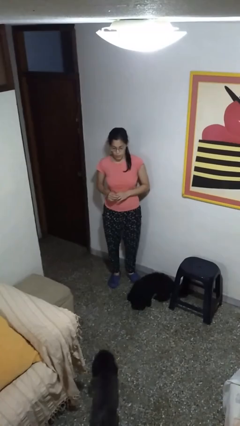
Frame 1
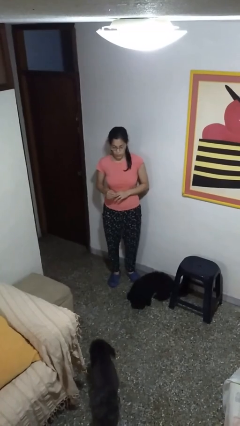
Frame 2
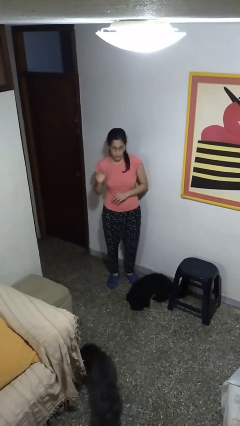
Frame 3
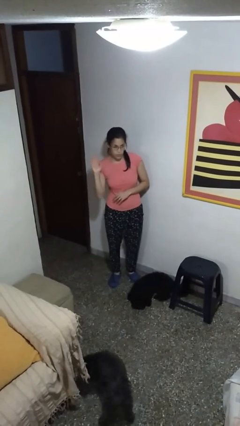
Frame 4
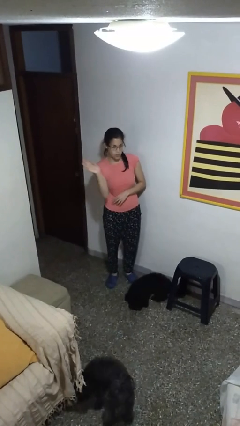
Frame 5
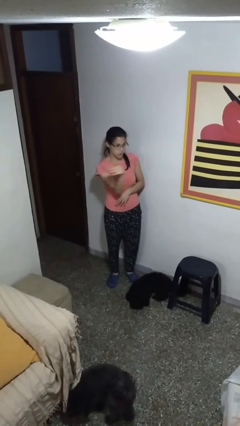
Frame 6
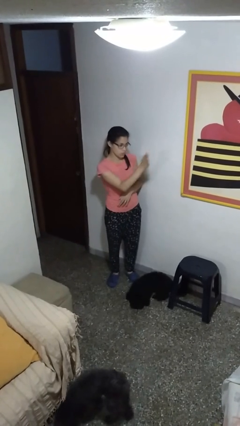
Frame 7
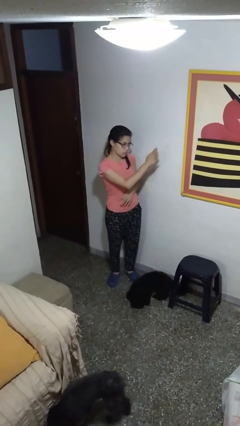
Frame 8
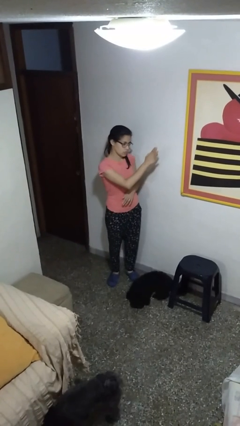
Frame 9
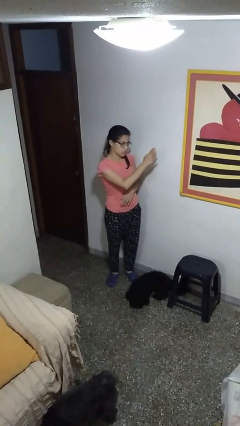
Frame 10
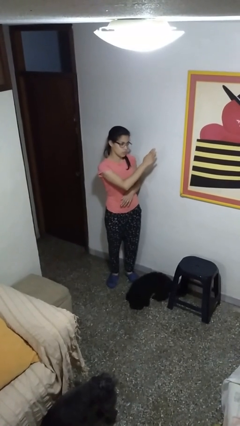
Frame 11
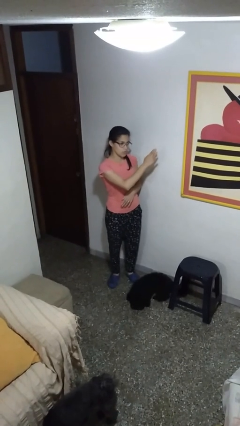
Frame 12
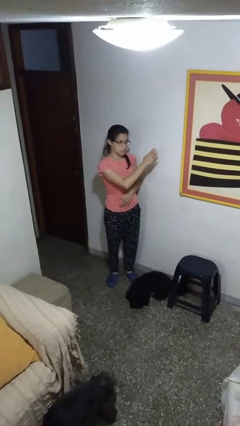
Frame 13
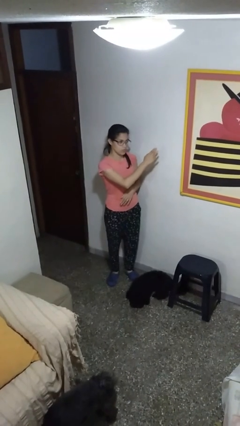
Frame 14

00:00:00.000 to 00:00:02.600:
person gestures swipe left

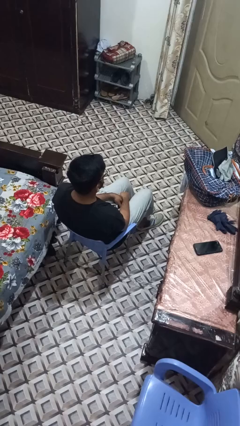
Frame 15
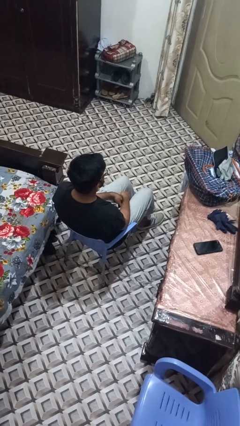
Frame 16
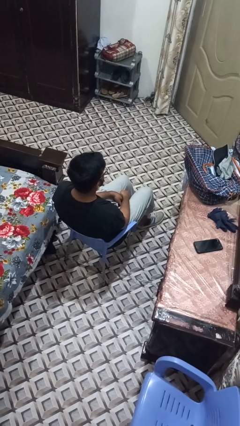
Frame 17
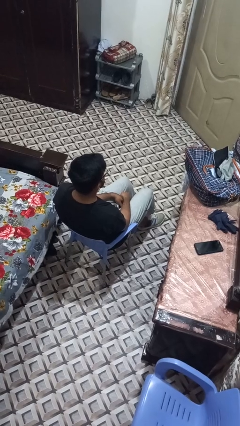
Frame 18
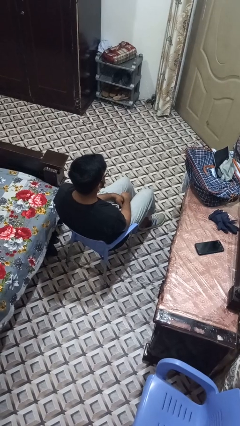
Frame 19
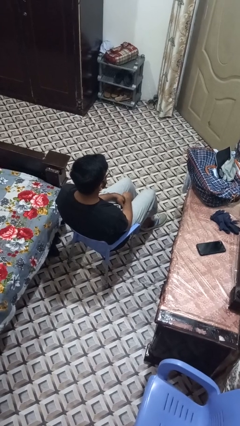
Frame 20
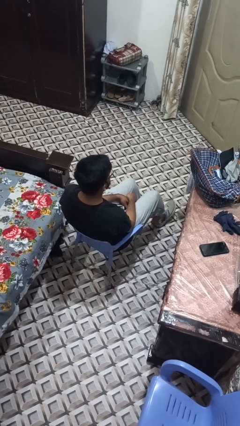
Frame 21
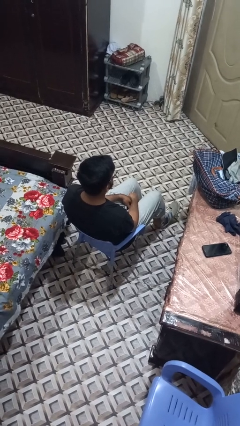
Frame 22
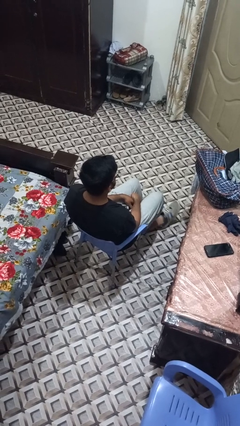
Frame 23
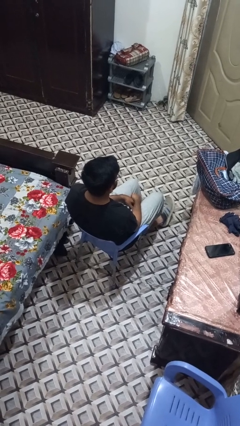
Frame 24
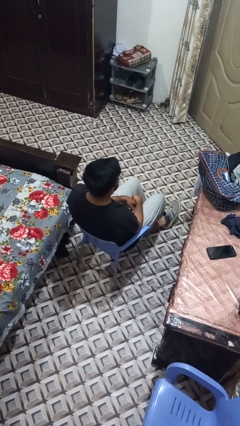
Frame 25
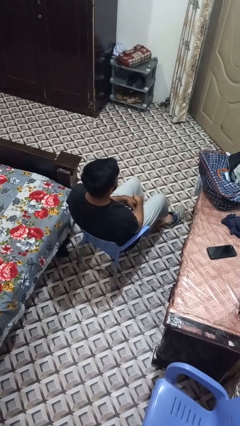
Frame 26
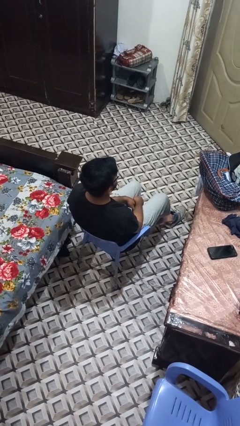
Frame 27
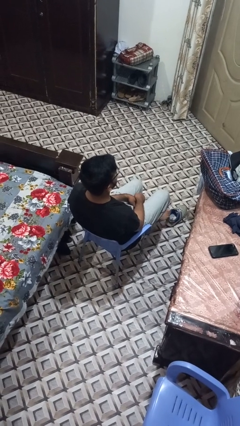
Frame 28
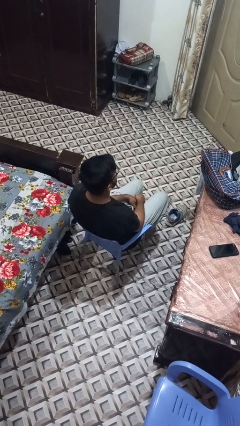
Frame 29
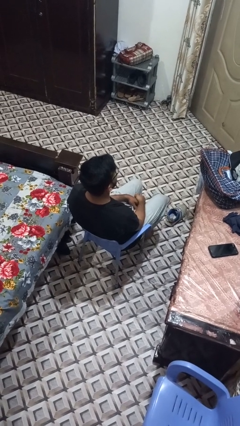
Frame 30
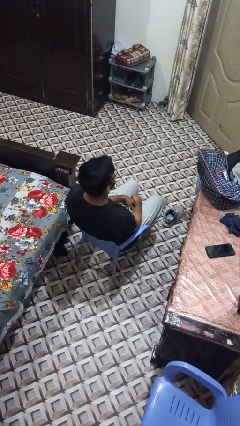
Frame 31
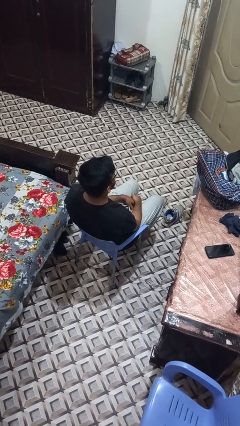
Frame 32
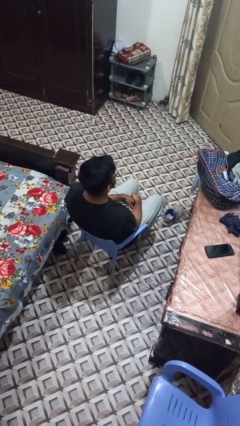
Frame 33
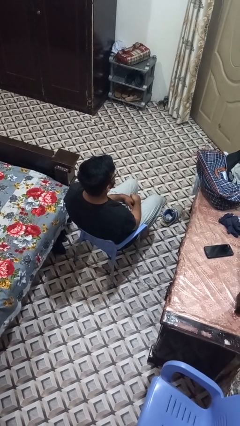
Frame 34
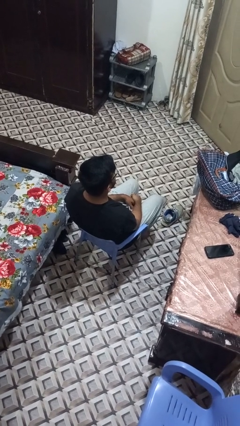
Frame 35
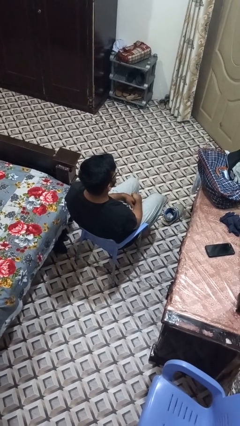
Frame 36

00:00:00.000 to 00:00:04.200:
person takes off shoes

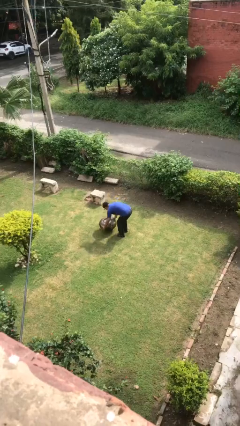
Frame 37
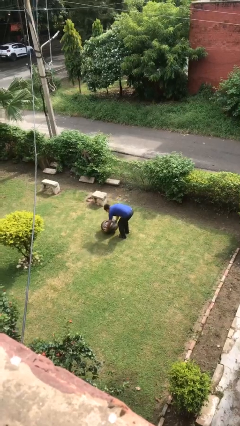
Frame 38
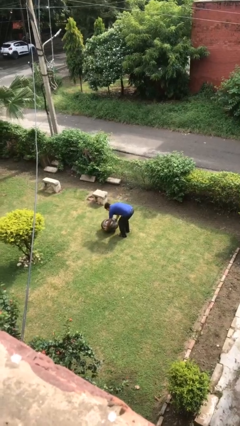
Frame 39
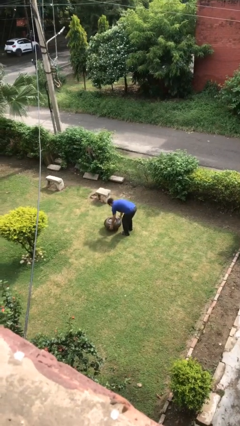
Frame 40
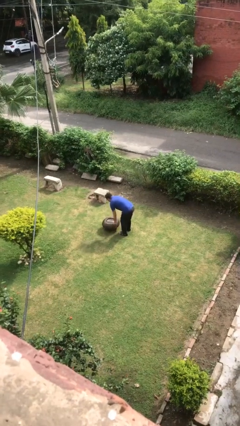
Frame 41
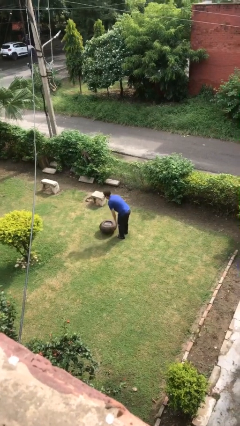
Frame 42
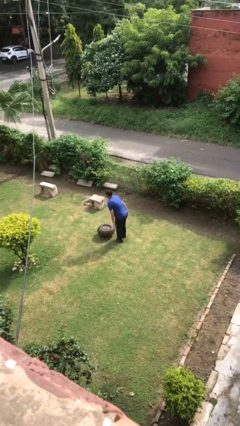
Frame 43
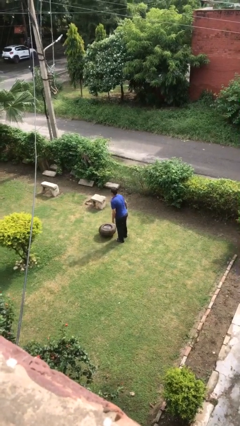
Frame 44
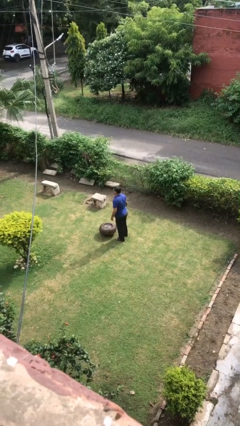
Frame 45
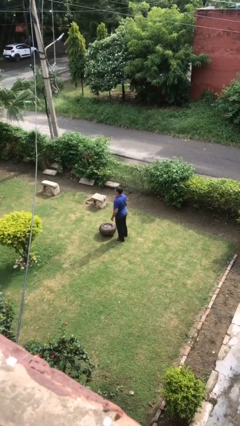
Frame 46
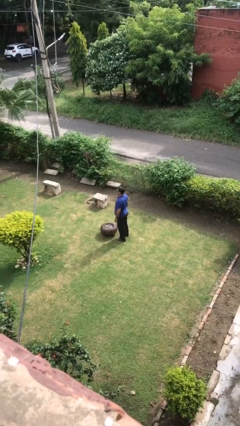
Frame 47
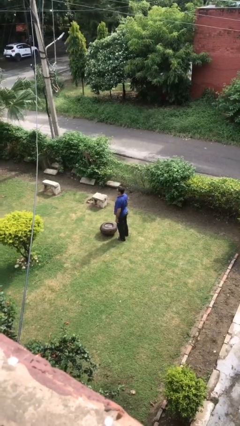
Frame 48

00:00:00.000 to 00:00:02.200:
person puts down object on floor

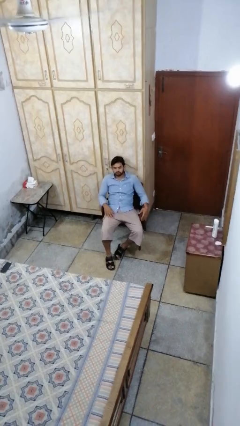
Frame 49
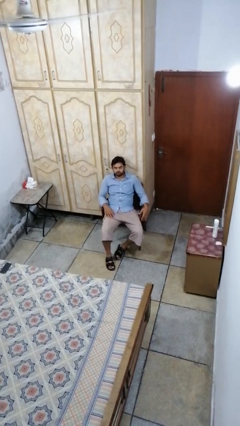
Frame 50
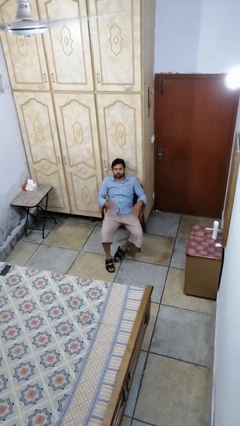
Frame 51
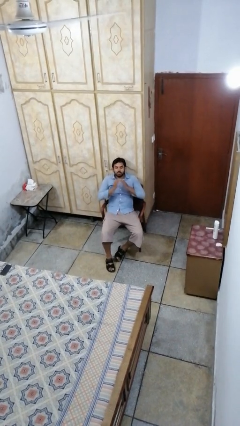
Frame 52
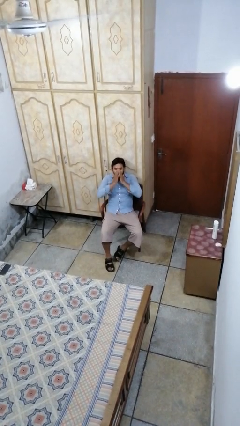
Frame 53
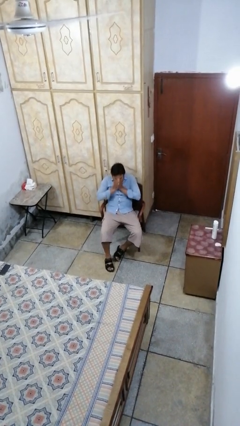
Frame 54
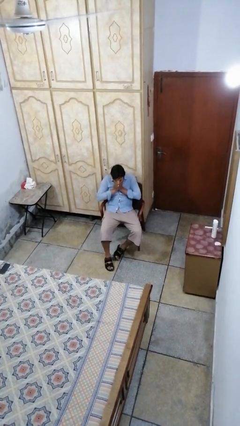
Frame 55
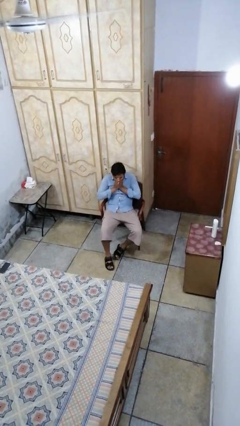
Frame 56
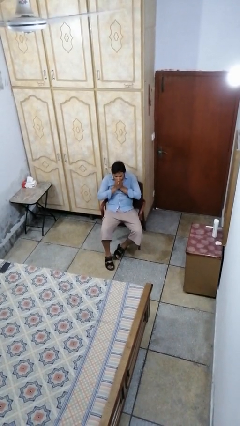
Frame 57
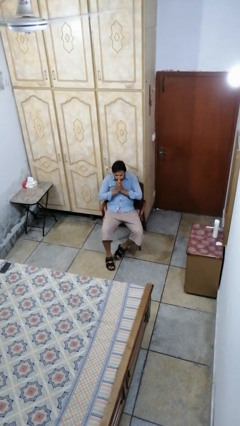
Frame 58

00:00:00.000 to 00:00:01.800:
person sneezes into hand

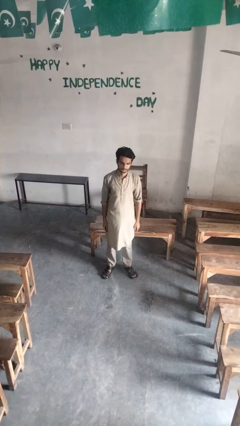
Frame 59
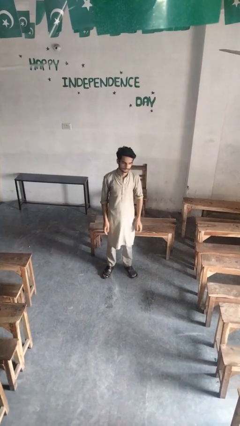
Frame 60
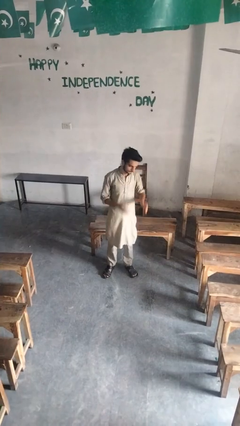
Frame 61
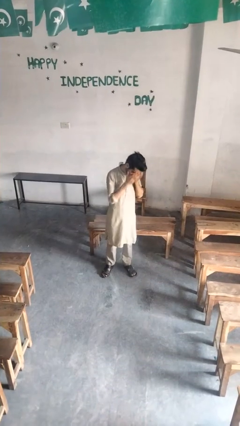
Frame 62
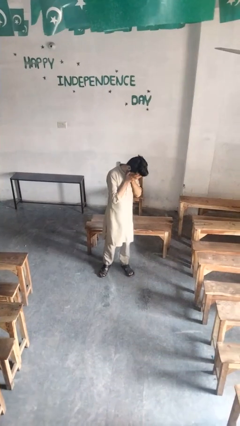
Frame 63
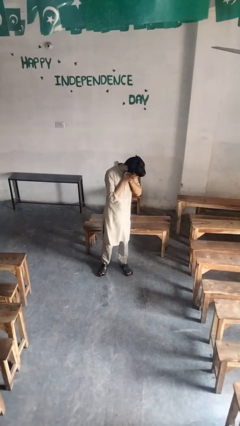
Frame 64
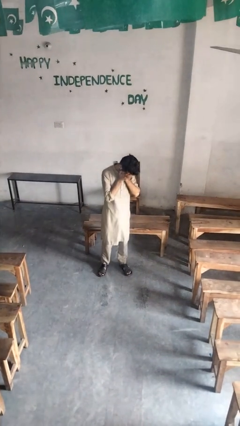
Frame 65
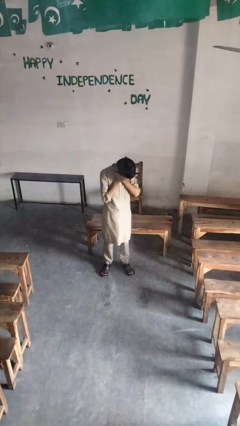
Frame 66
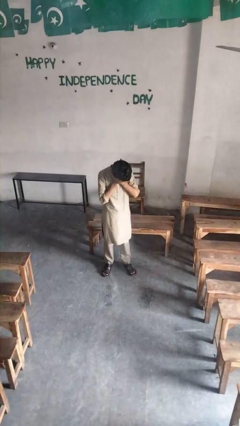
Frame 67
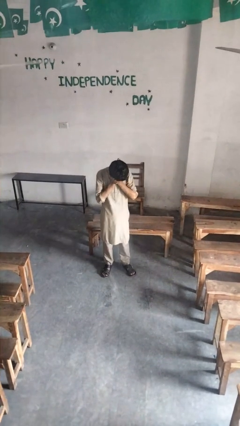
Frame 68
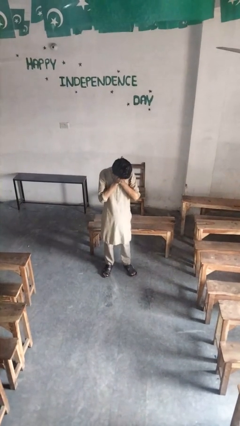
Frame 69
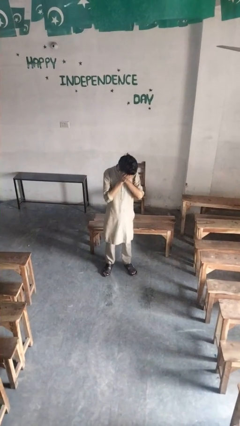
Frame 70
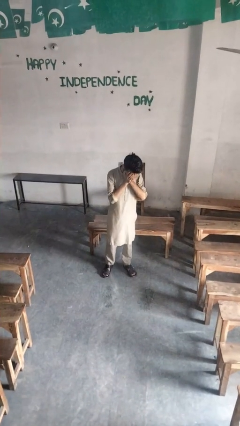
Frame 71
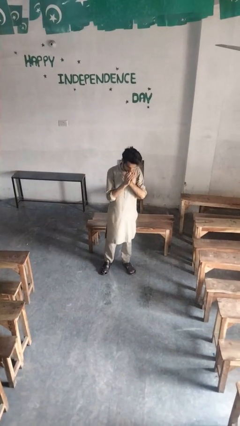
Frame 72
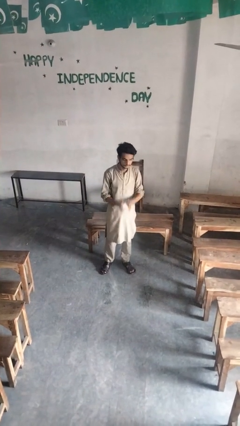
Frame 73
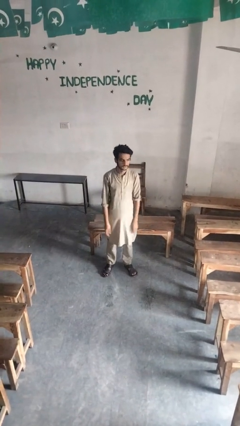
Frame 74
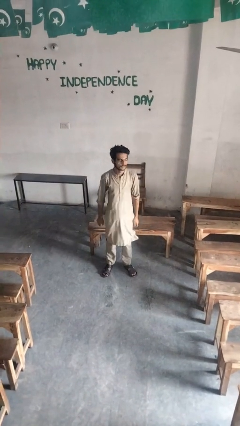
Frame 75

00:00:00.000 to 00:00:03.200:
person covers face with hands

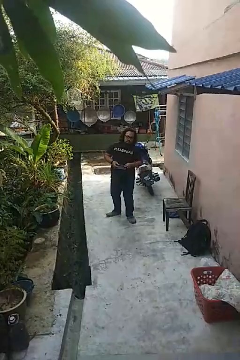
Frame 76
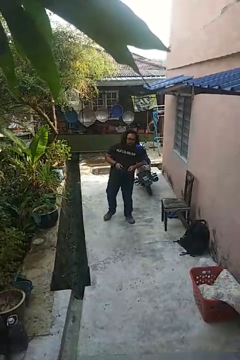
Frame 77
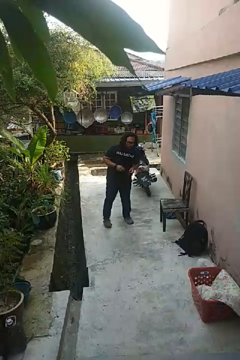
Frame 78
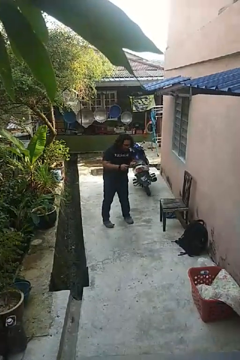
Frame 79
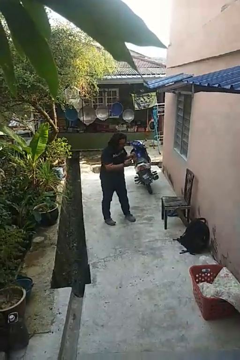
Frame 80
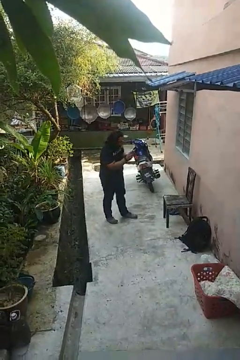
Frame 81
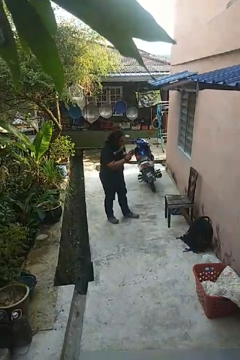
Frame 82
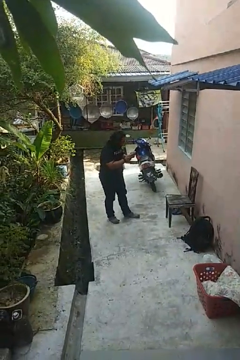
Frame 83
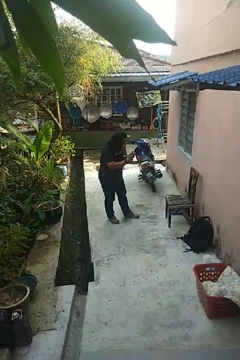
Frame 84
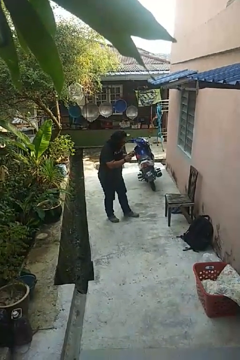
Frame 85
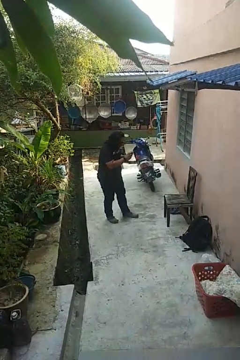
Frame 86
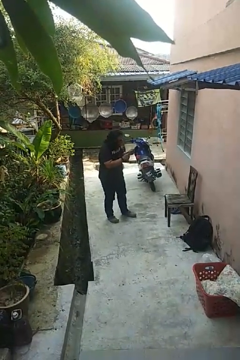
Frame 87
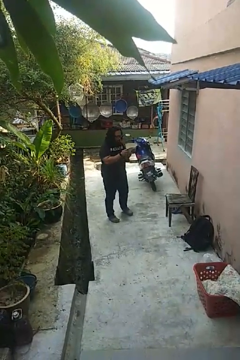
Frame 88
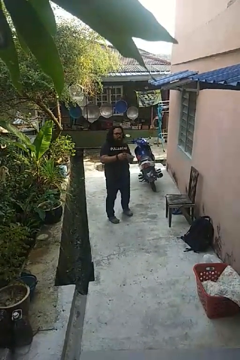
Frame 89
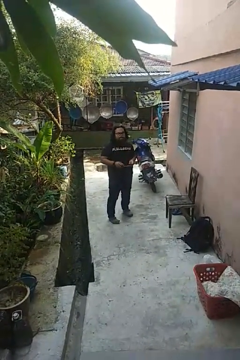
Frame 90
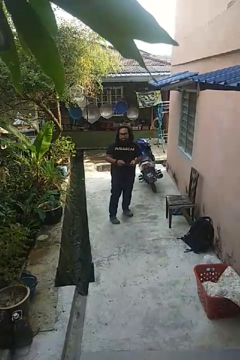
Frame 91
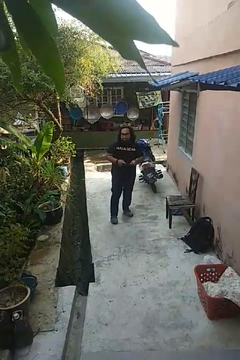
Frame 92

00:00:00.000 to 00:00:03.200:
person interacts with handheld game

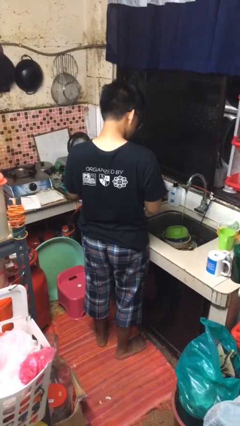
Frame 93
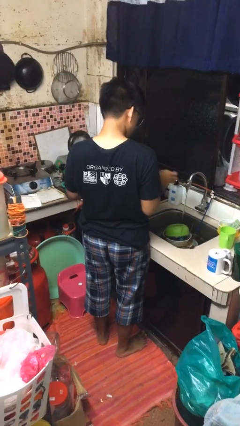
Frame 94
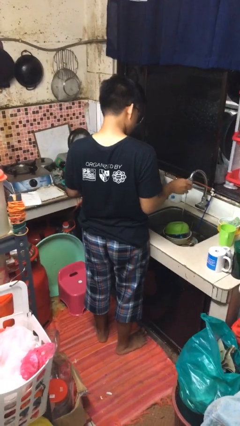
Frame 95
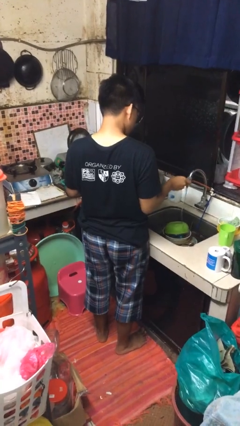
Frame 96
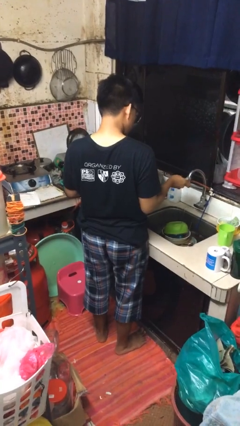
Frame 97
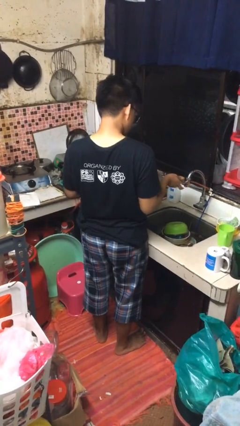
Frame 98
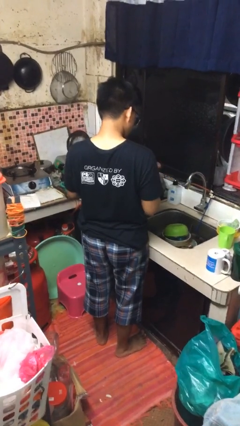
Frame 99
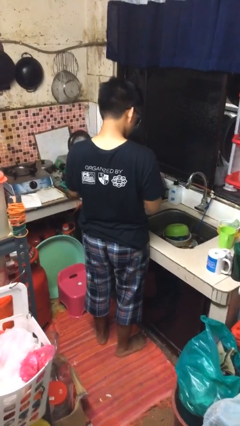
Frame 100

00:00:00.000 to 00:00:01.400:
person turns off faucet
